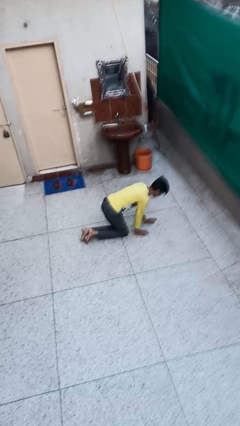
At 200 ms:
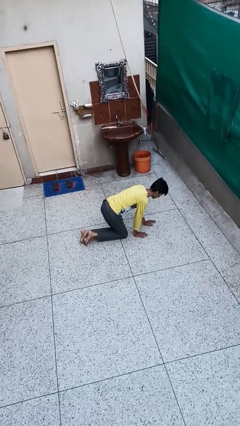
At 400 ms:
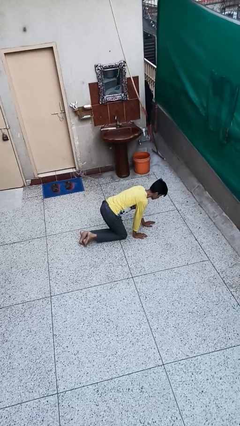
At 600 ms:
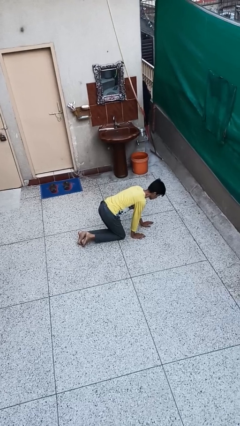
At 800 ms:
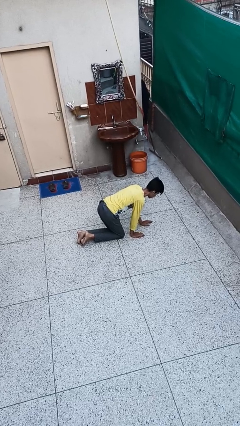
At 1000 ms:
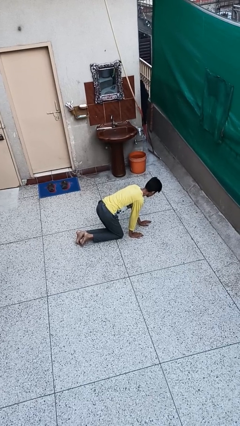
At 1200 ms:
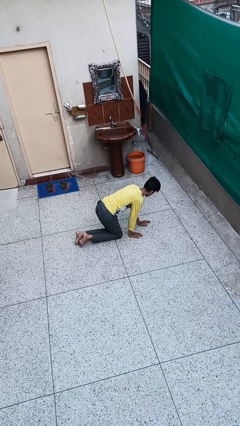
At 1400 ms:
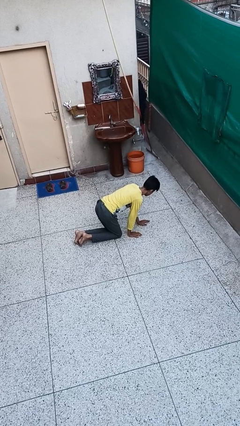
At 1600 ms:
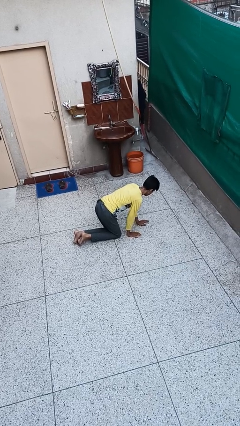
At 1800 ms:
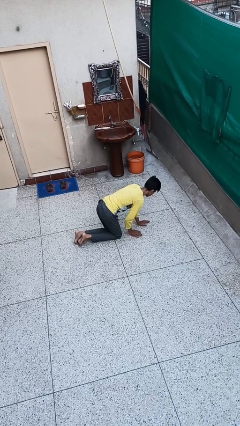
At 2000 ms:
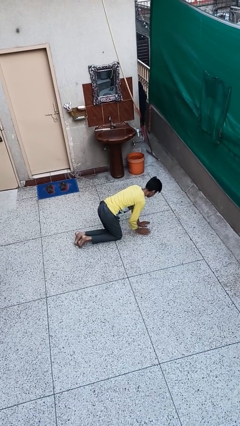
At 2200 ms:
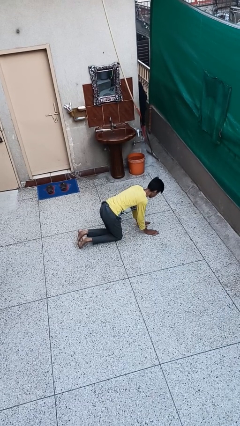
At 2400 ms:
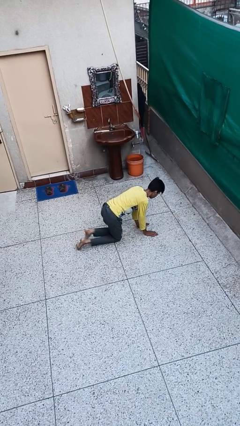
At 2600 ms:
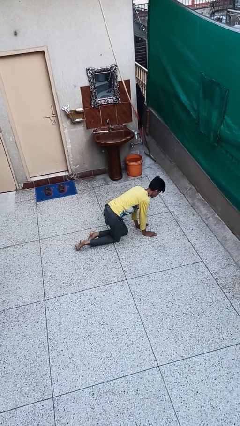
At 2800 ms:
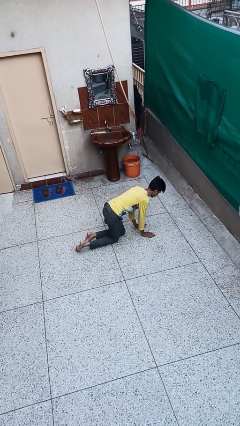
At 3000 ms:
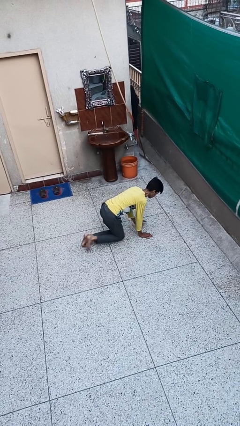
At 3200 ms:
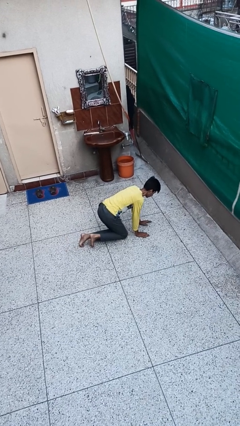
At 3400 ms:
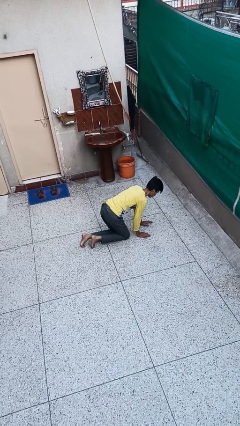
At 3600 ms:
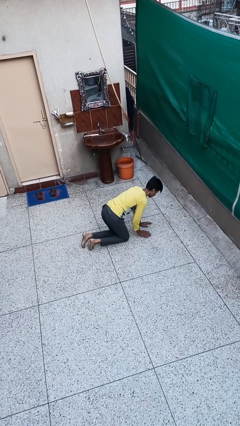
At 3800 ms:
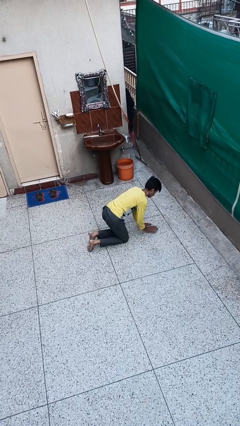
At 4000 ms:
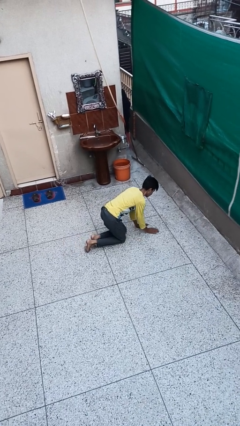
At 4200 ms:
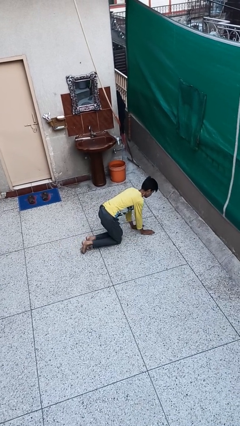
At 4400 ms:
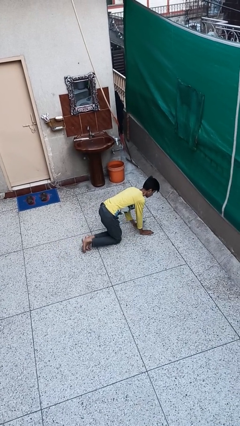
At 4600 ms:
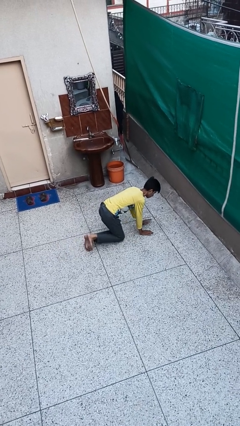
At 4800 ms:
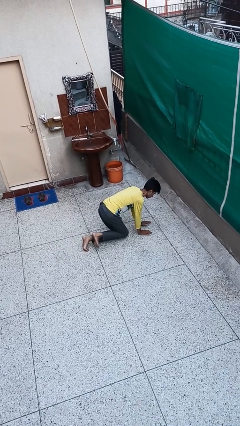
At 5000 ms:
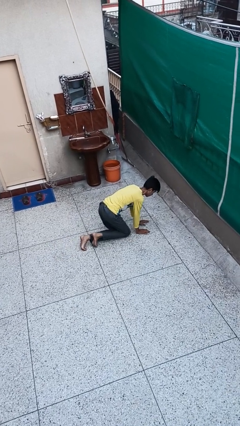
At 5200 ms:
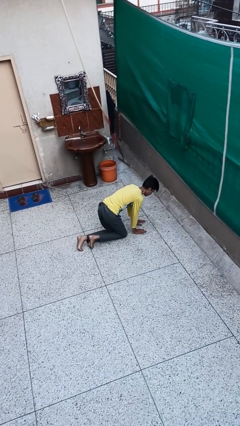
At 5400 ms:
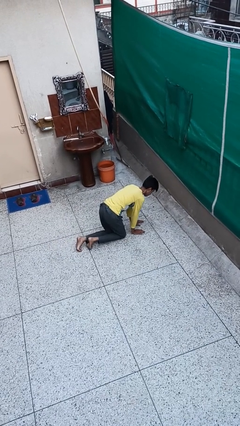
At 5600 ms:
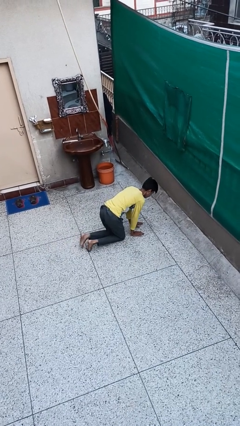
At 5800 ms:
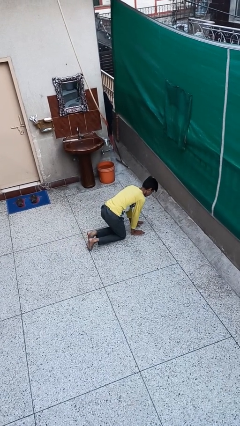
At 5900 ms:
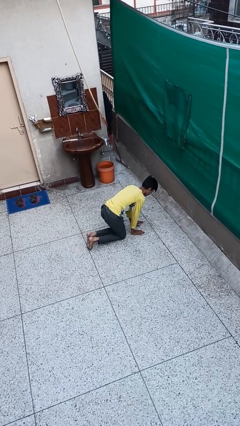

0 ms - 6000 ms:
person crawls

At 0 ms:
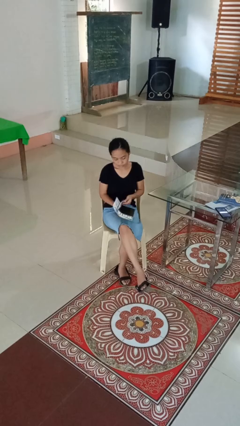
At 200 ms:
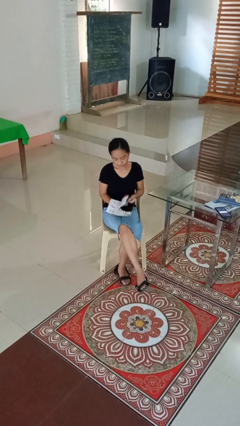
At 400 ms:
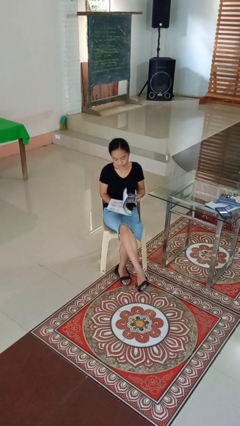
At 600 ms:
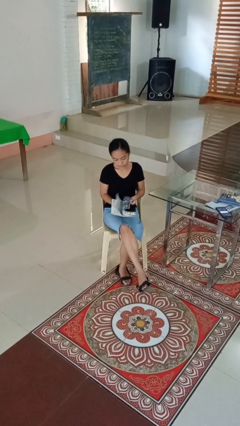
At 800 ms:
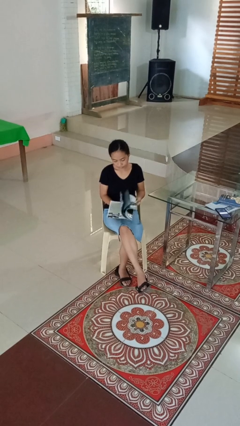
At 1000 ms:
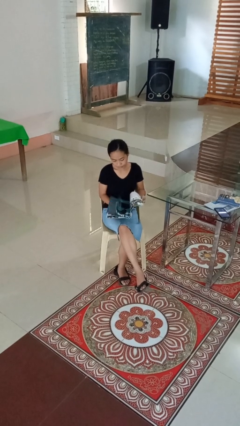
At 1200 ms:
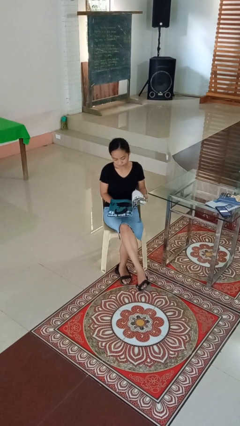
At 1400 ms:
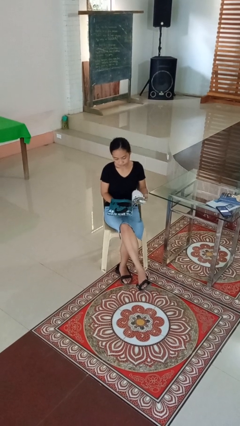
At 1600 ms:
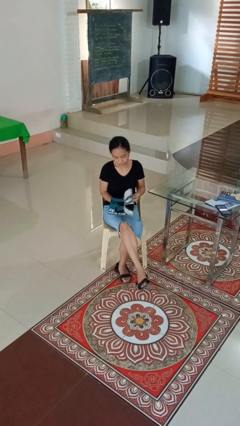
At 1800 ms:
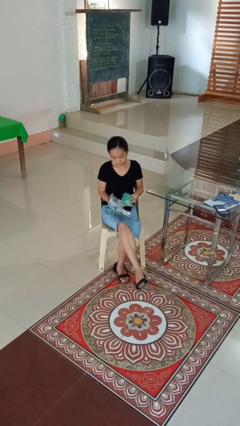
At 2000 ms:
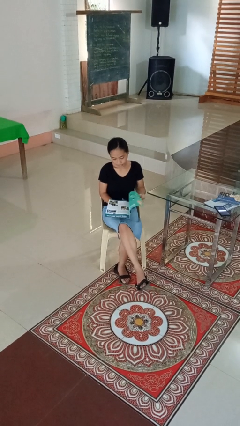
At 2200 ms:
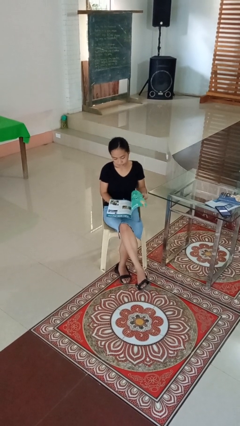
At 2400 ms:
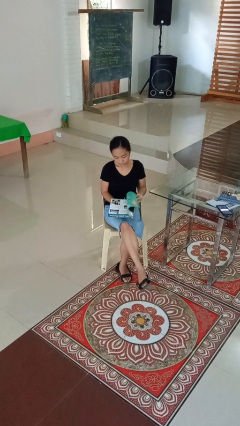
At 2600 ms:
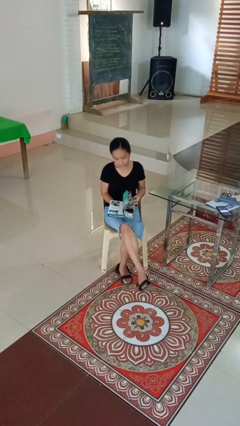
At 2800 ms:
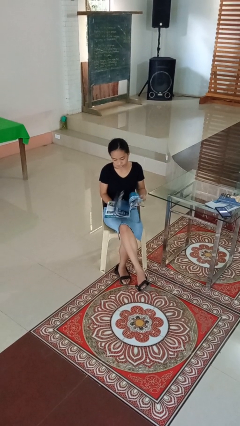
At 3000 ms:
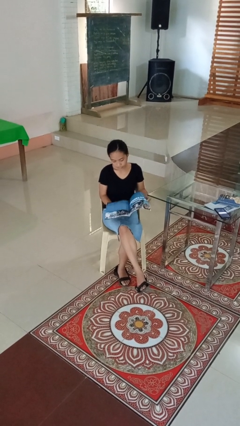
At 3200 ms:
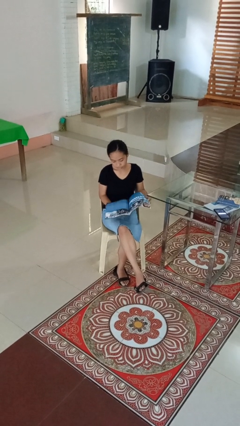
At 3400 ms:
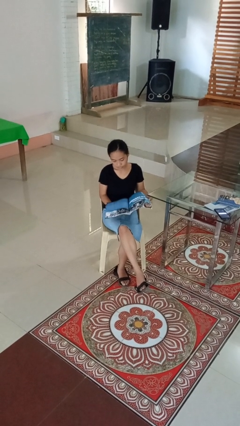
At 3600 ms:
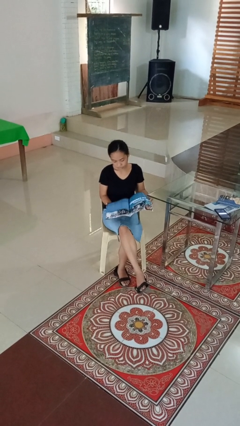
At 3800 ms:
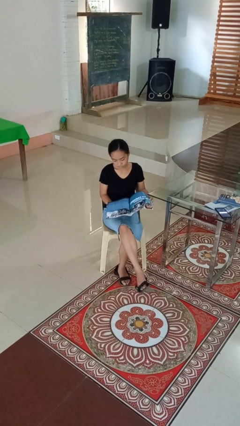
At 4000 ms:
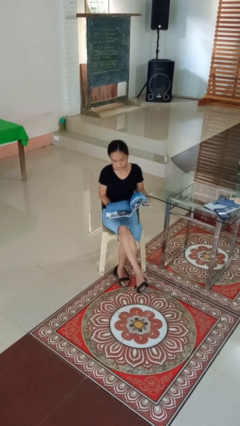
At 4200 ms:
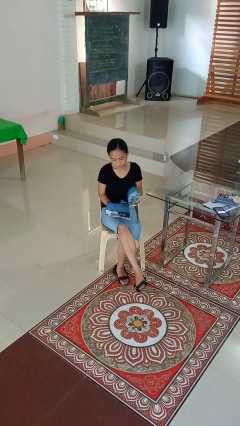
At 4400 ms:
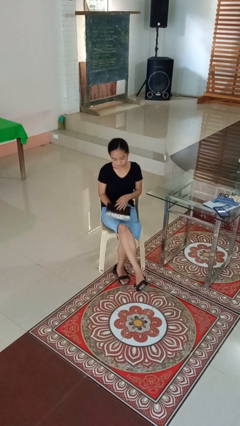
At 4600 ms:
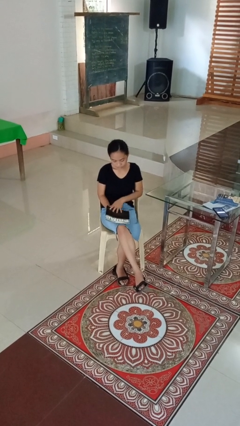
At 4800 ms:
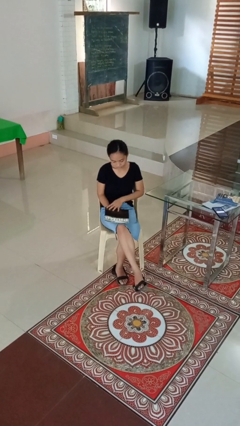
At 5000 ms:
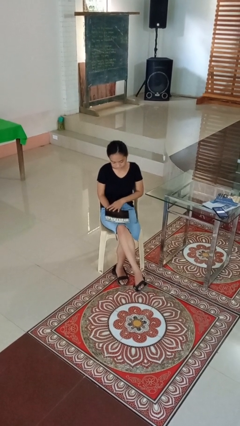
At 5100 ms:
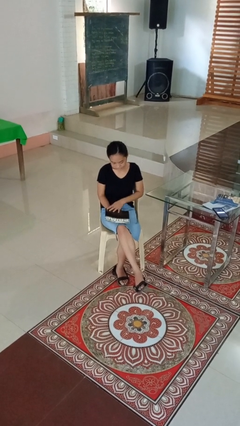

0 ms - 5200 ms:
person reads magazine

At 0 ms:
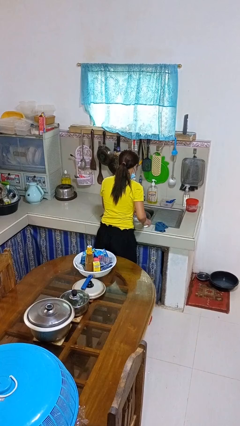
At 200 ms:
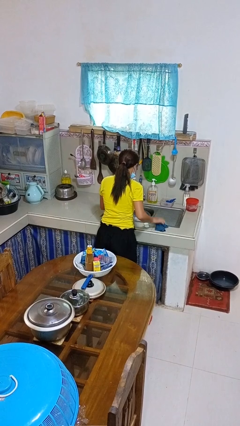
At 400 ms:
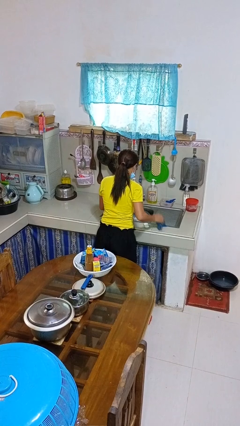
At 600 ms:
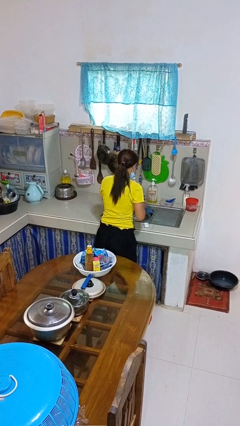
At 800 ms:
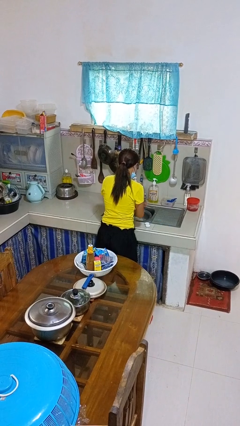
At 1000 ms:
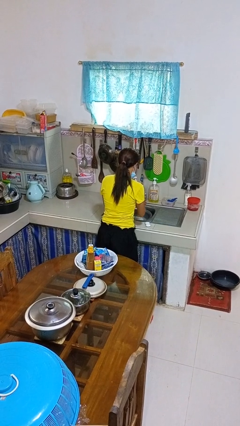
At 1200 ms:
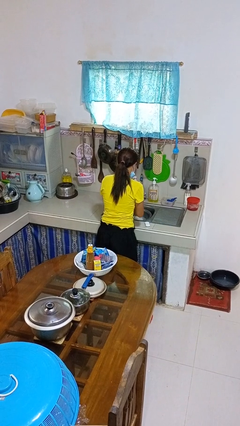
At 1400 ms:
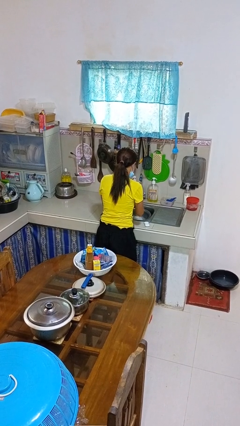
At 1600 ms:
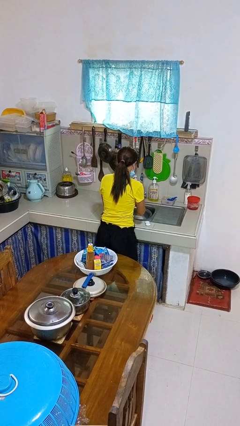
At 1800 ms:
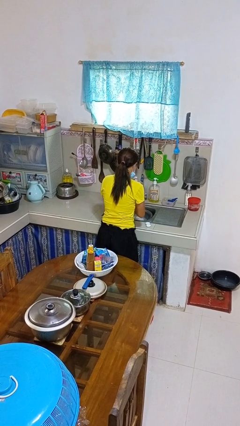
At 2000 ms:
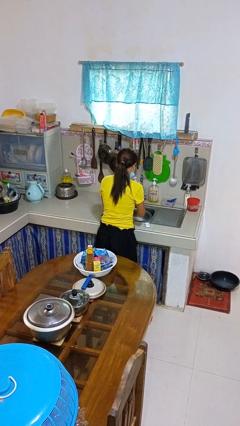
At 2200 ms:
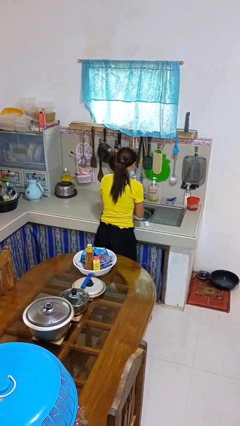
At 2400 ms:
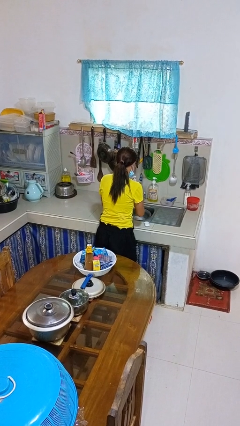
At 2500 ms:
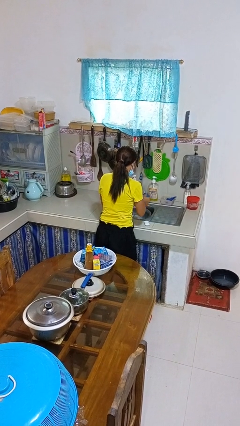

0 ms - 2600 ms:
person dries hands with towel

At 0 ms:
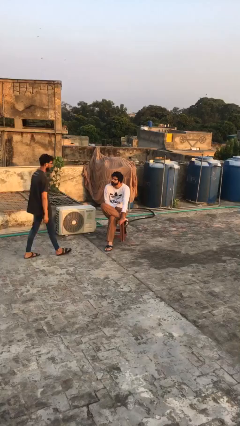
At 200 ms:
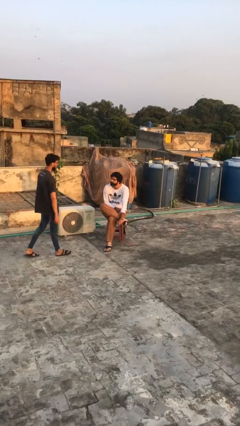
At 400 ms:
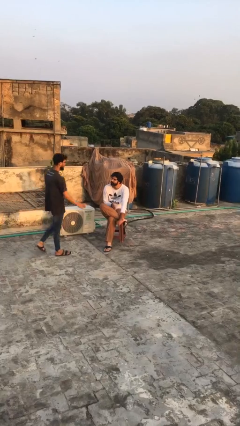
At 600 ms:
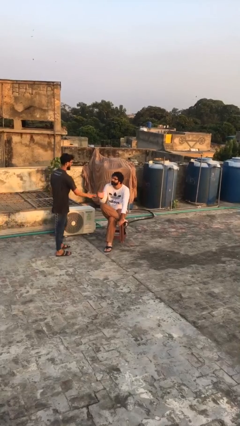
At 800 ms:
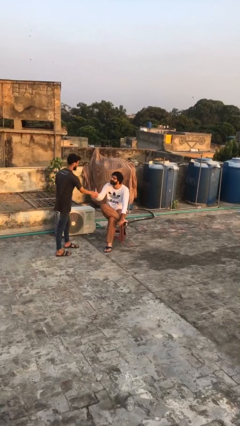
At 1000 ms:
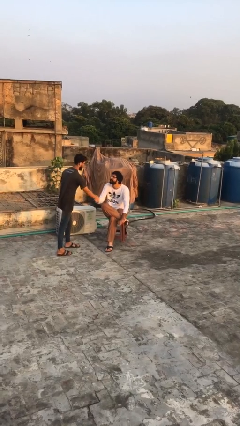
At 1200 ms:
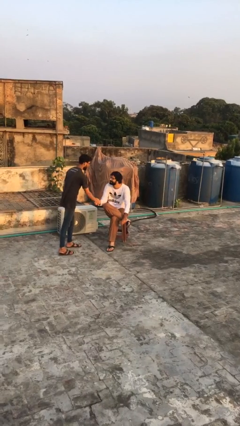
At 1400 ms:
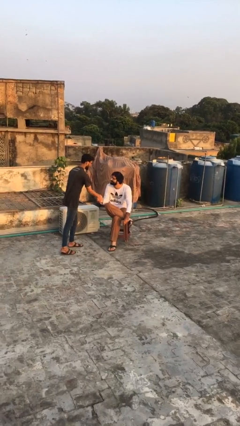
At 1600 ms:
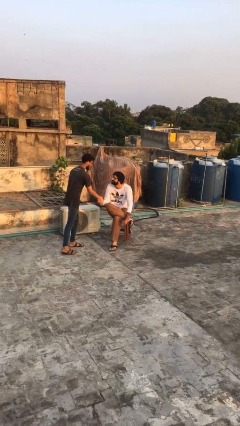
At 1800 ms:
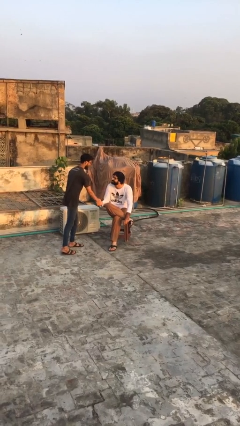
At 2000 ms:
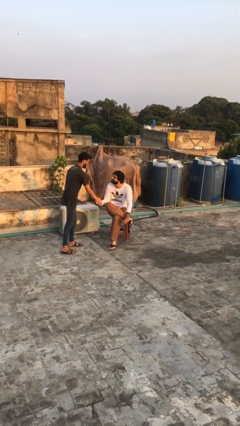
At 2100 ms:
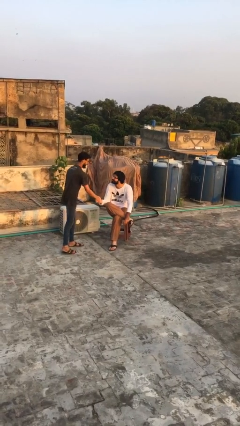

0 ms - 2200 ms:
person shakes hand

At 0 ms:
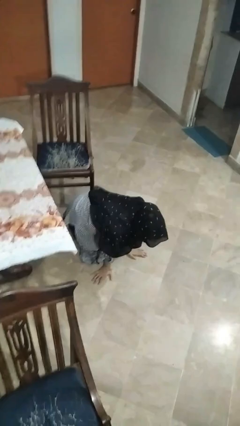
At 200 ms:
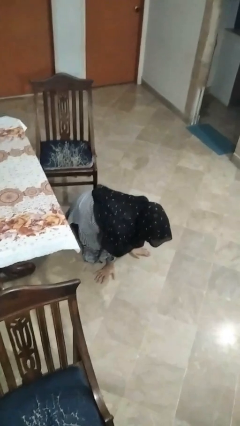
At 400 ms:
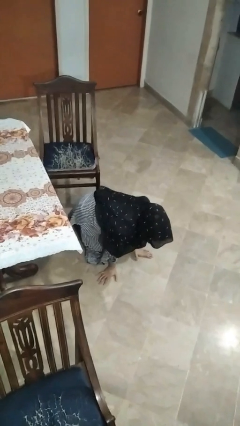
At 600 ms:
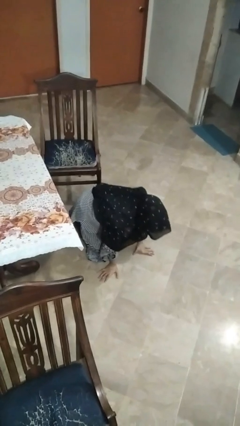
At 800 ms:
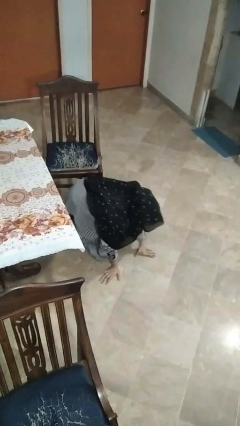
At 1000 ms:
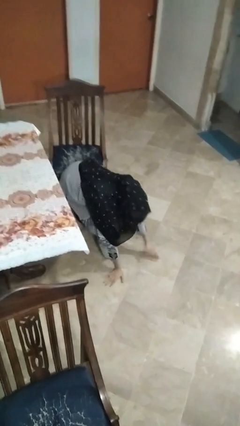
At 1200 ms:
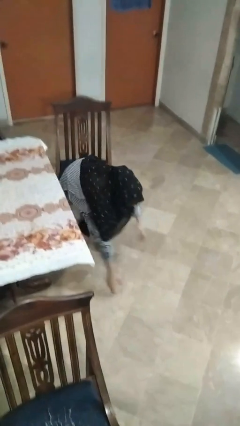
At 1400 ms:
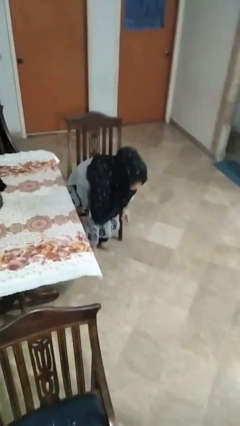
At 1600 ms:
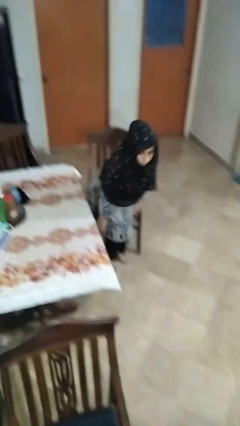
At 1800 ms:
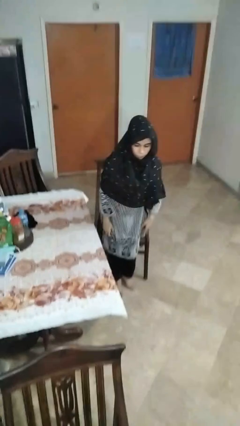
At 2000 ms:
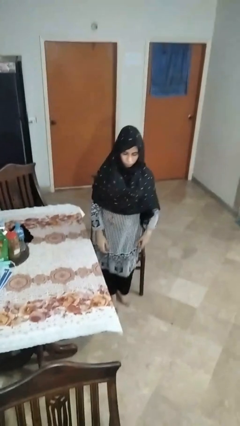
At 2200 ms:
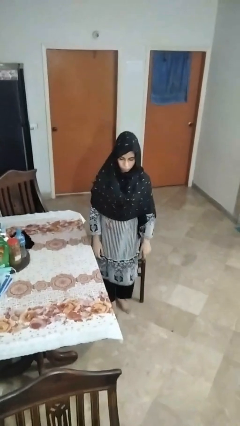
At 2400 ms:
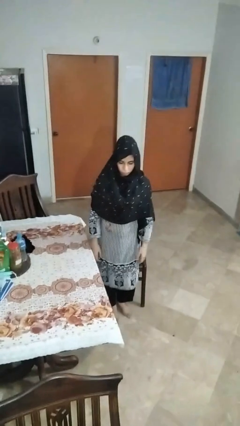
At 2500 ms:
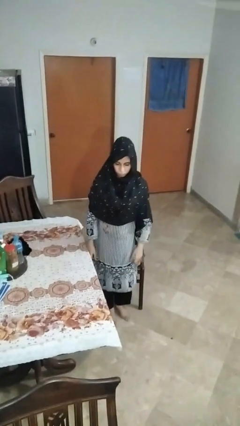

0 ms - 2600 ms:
person stands up from floor
